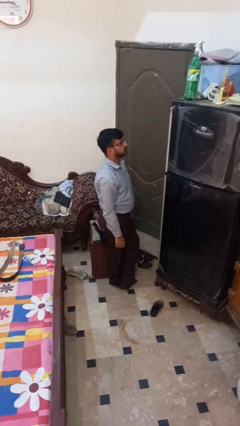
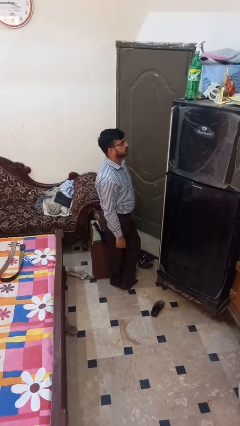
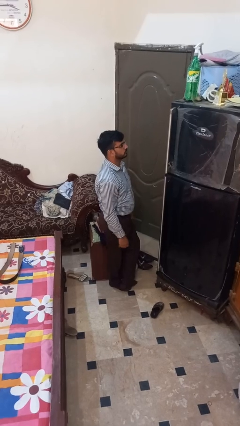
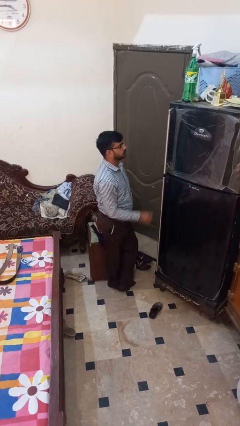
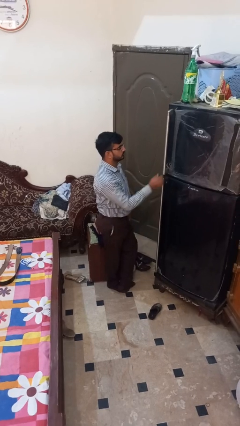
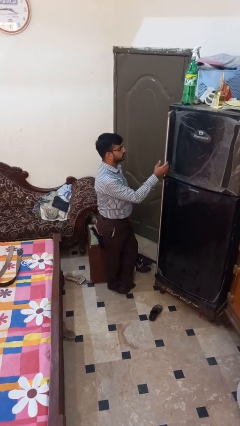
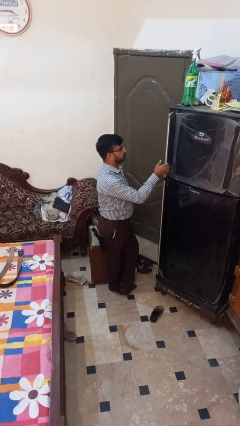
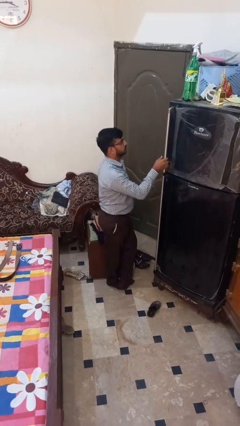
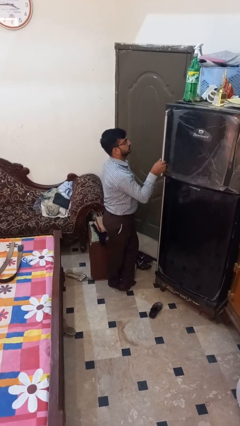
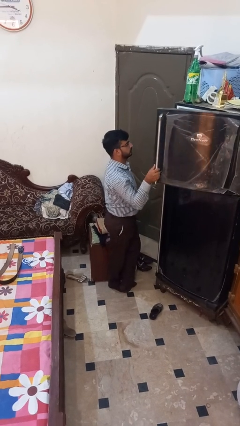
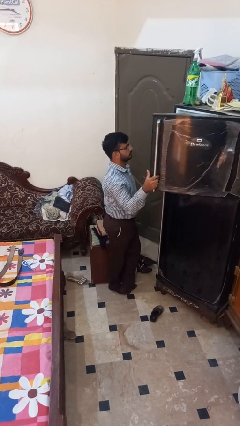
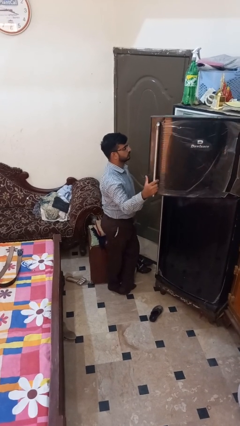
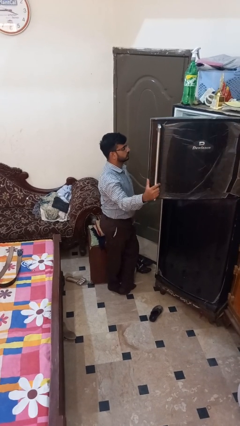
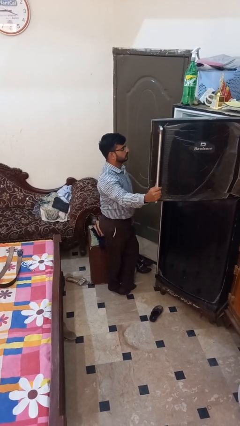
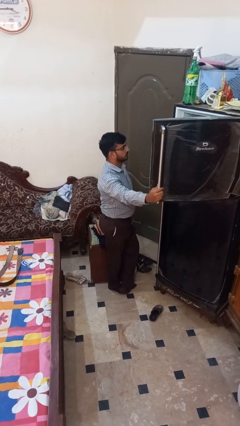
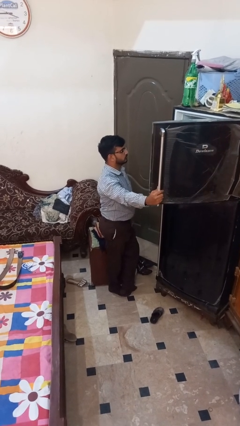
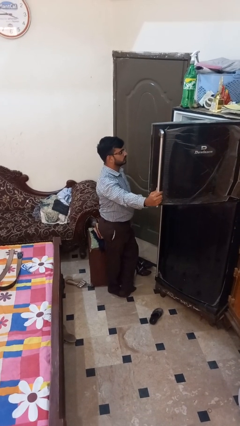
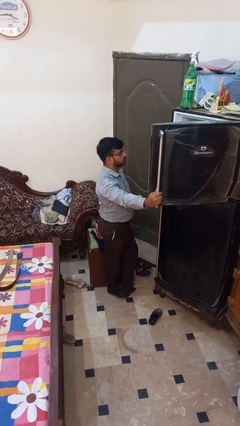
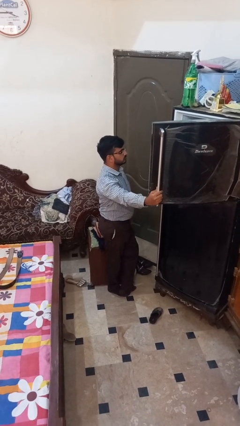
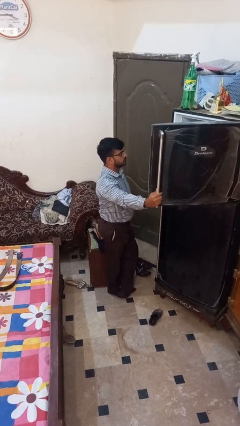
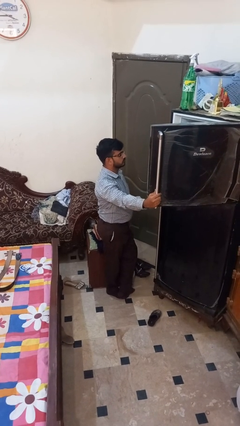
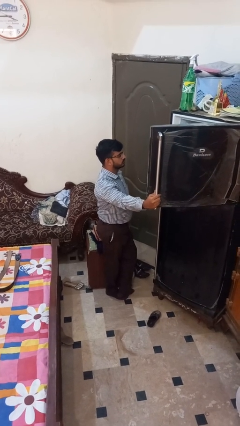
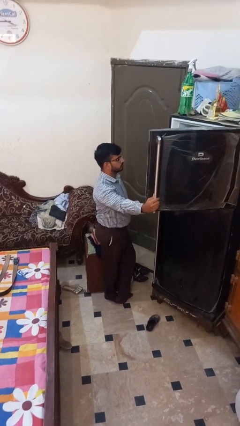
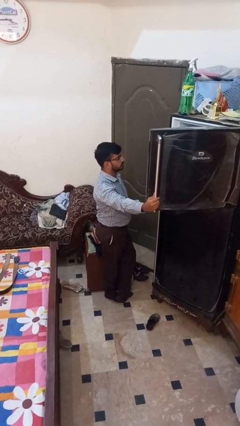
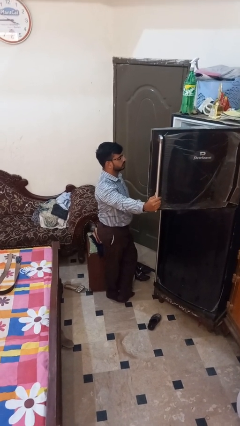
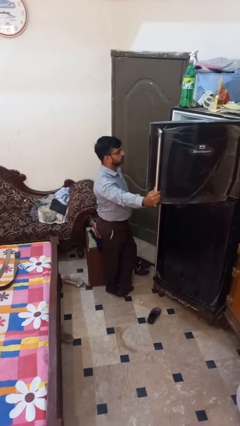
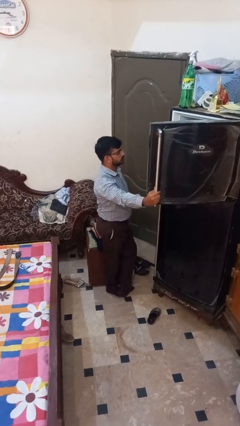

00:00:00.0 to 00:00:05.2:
person opens refrigerator

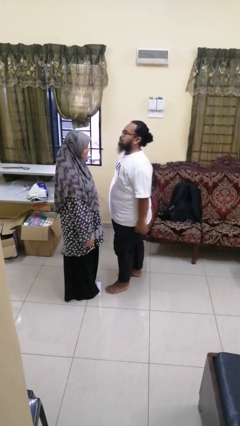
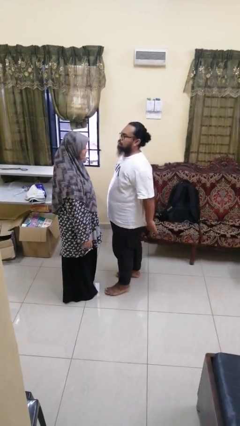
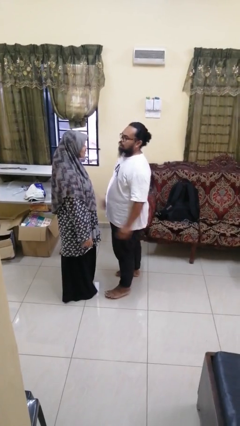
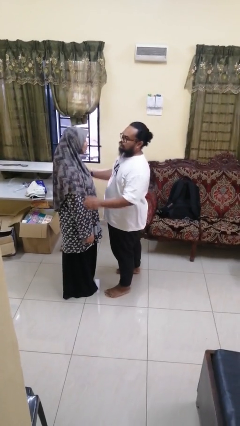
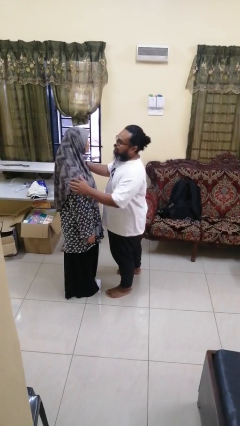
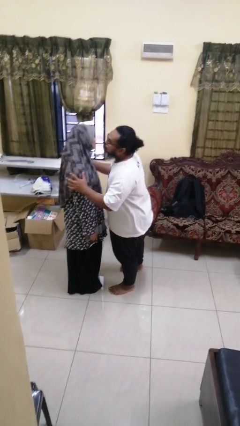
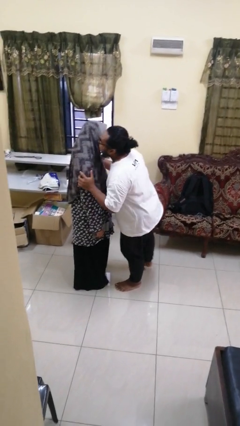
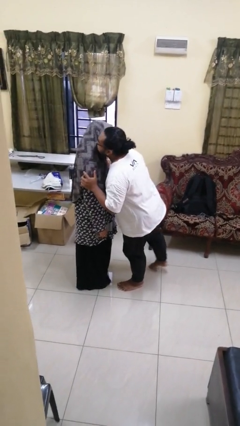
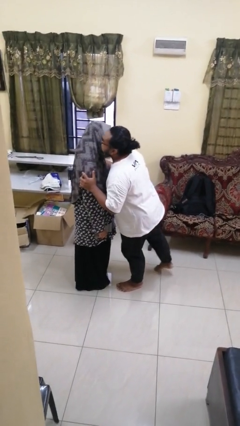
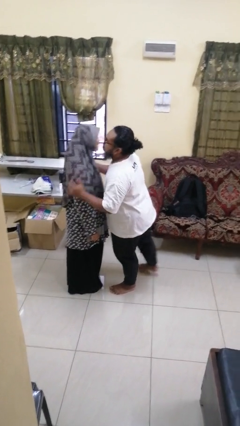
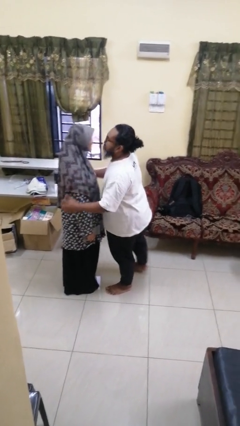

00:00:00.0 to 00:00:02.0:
person kisses cheek of person

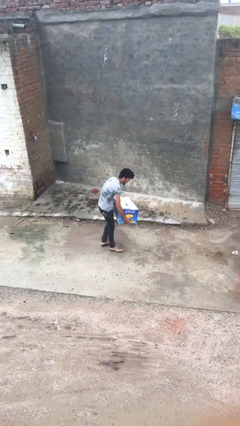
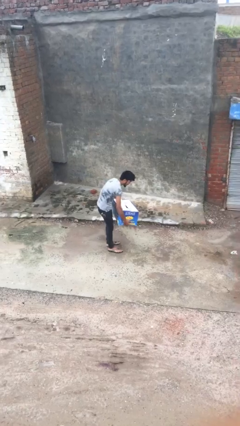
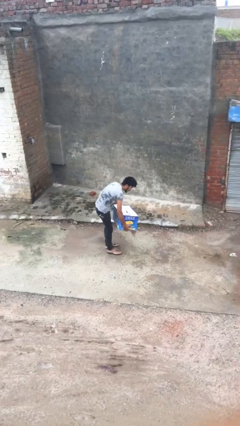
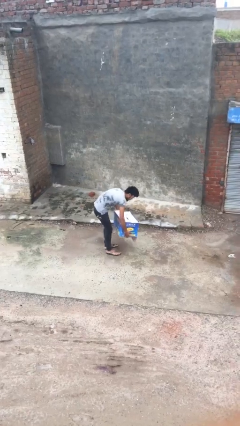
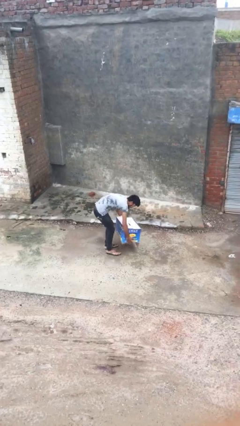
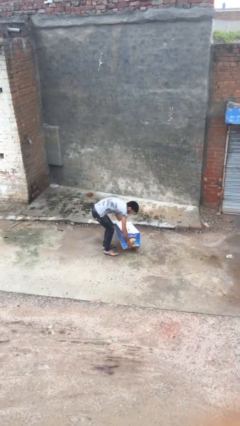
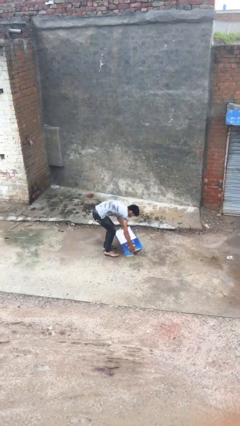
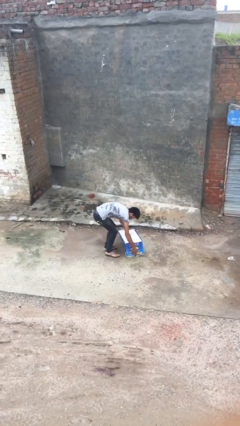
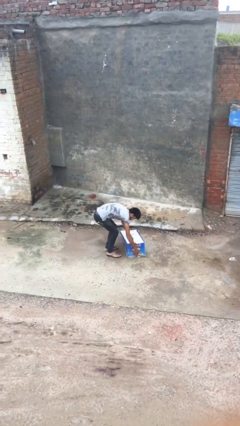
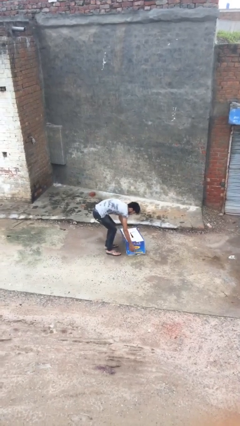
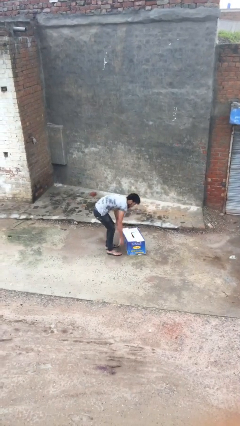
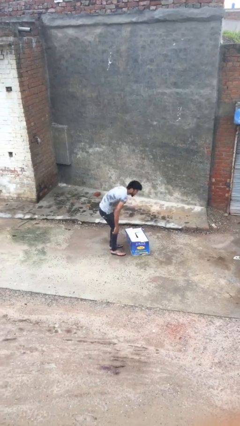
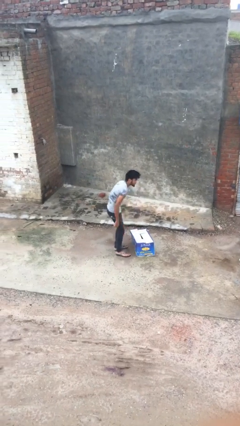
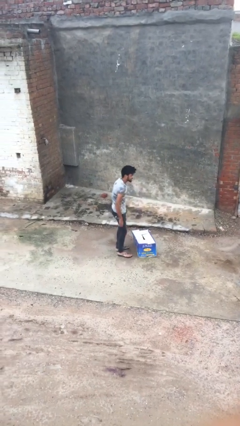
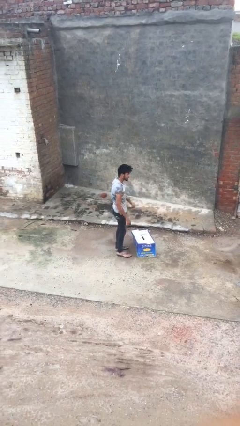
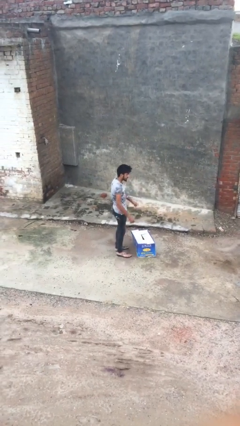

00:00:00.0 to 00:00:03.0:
person puts down object on floor

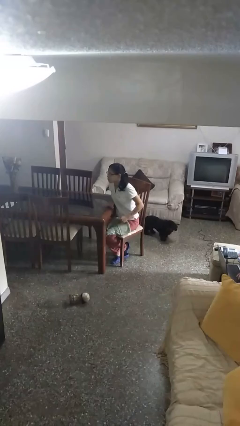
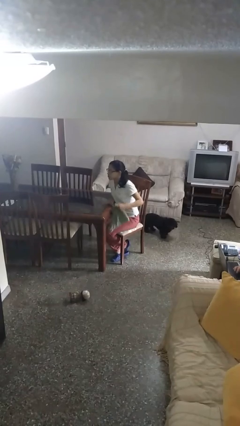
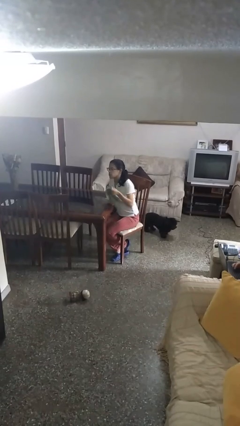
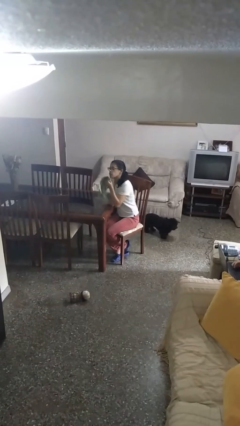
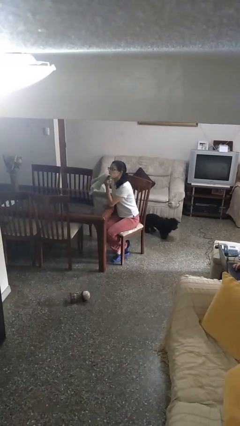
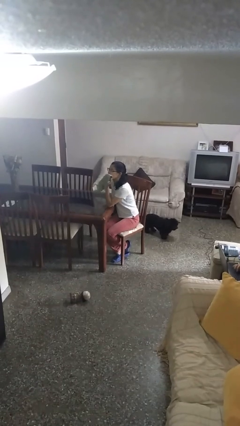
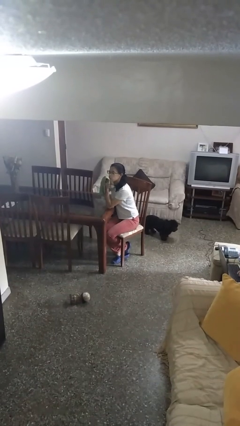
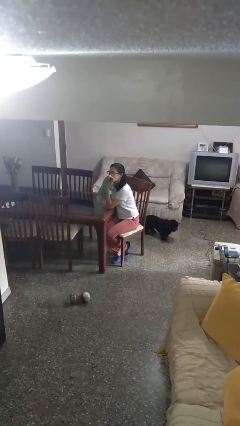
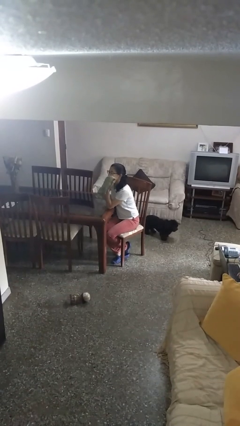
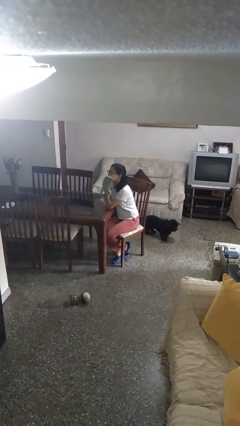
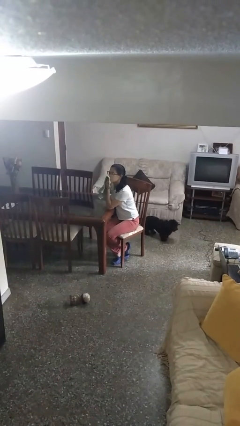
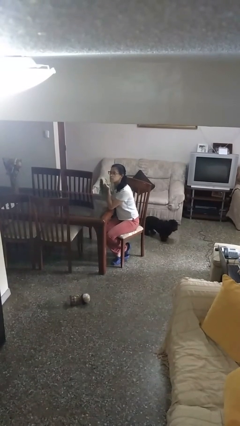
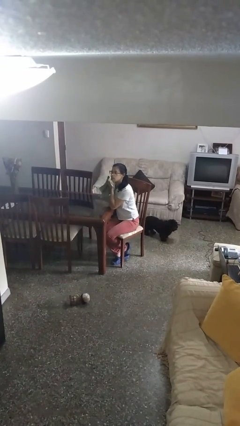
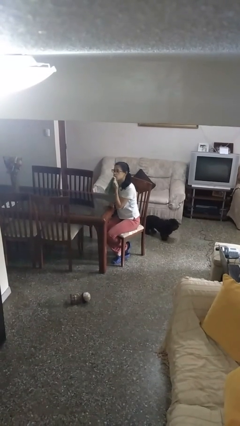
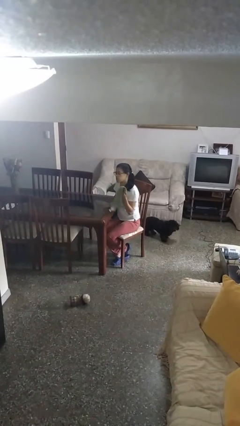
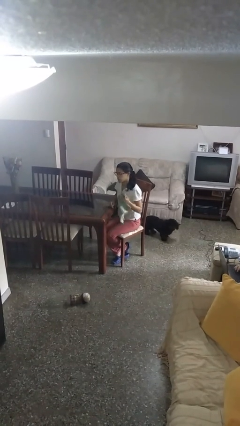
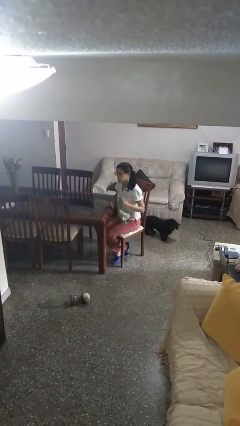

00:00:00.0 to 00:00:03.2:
person wipes mouth with napkin

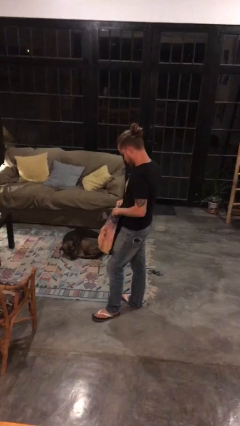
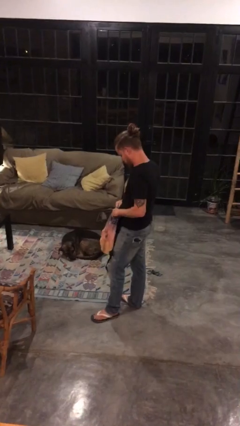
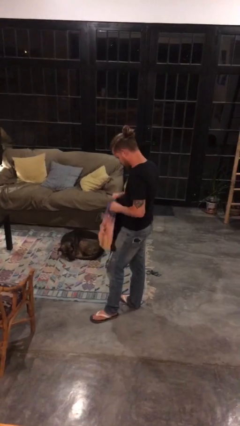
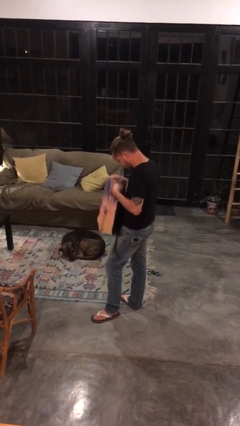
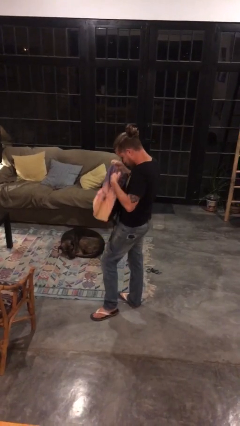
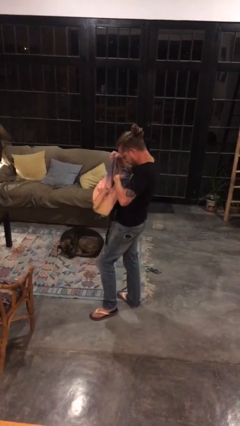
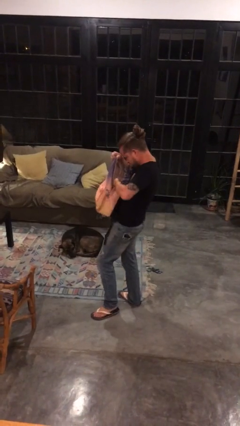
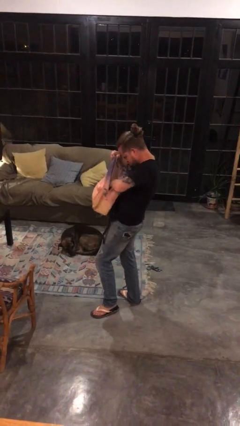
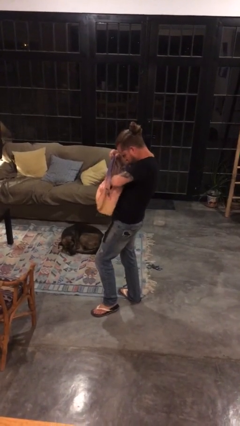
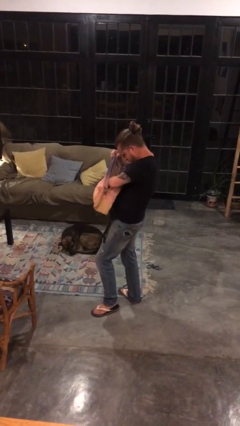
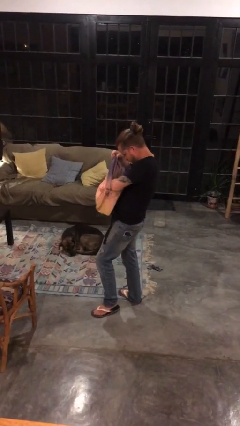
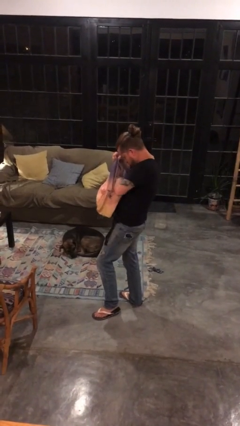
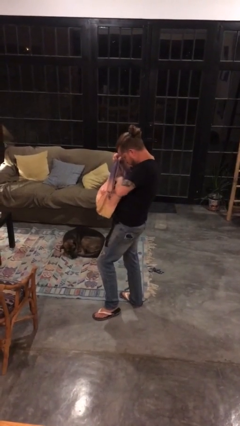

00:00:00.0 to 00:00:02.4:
person searches in backpack

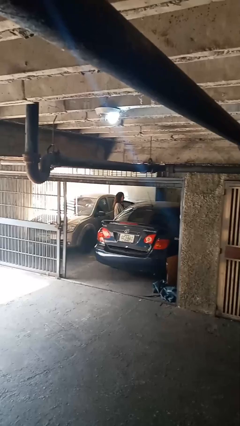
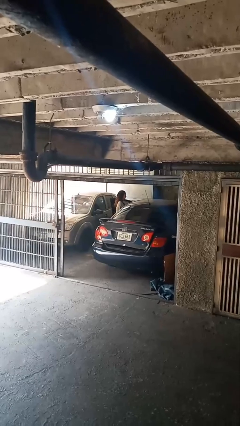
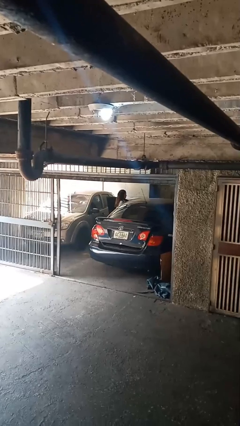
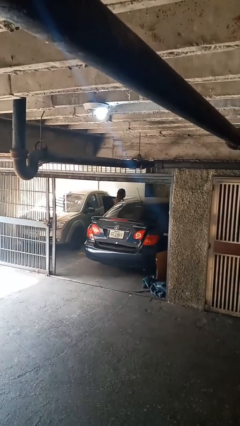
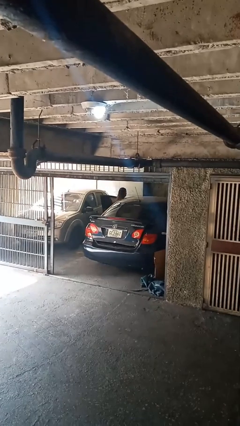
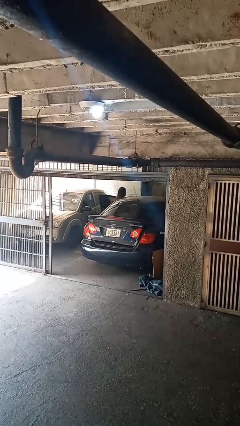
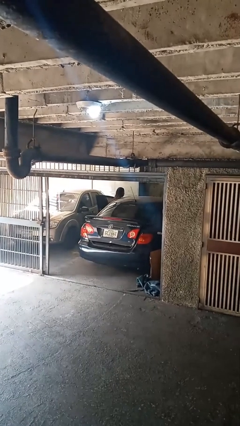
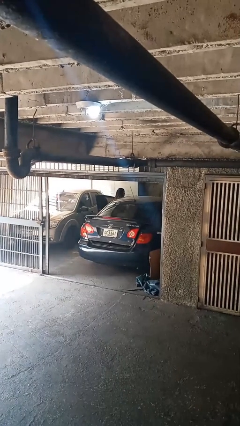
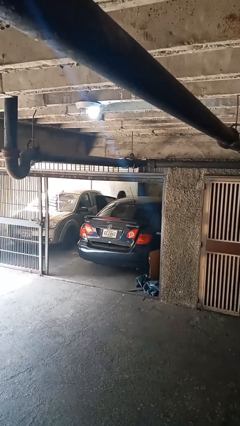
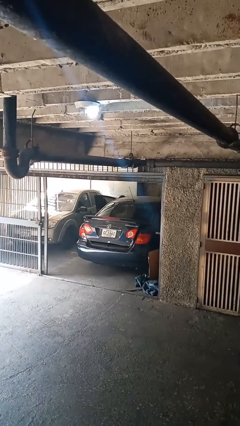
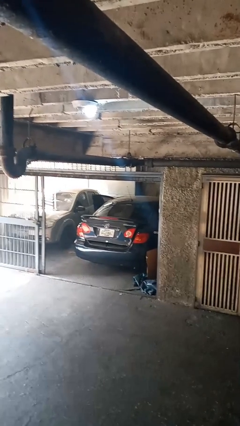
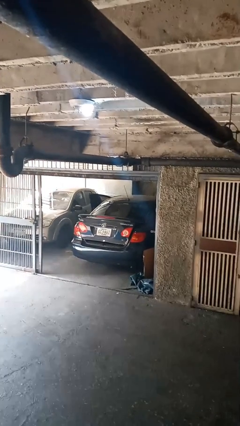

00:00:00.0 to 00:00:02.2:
person enters car
